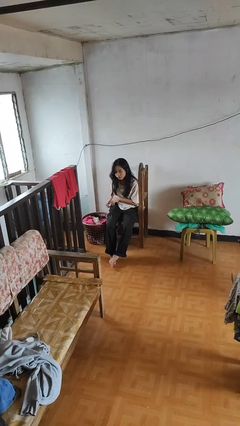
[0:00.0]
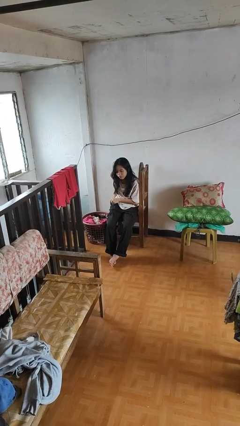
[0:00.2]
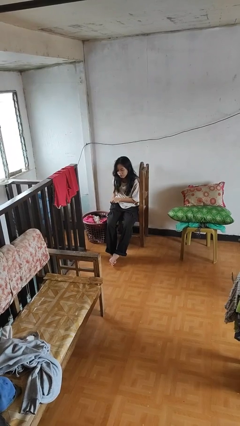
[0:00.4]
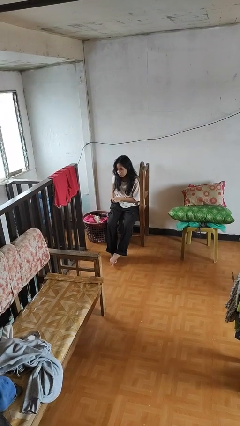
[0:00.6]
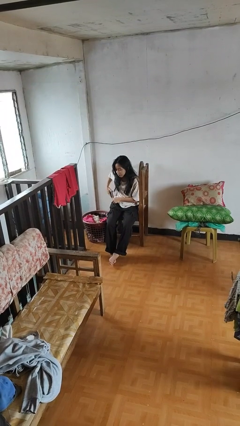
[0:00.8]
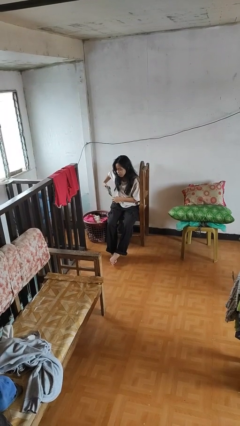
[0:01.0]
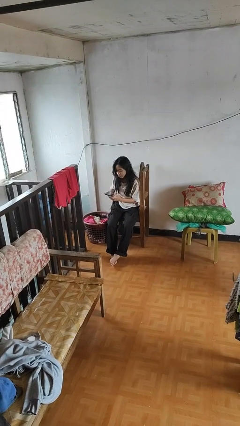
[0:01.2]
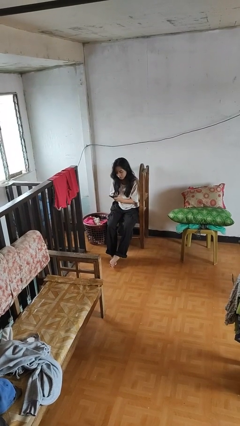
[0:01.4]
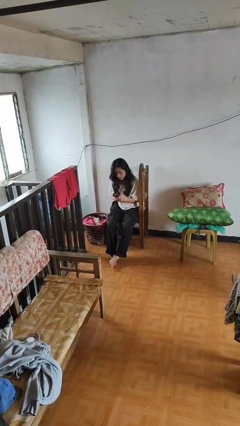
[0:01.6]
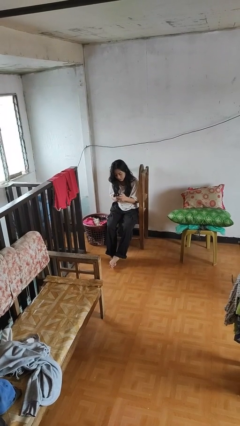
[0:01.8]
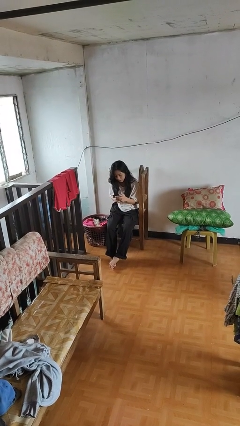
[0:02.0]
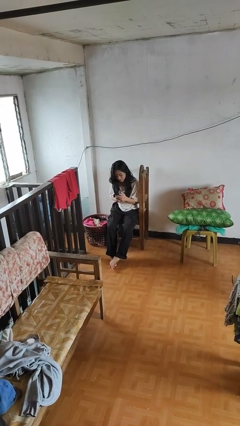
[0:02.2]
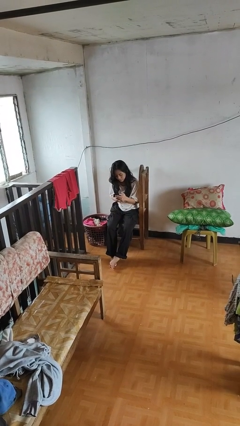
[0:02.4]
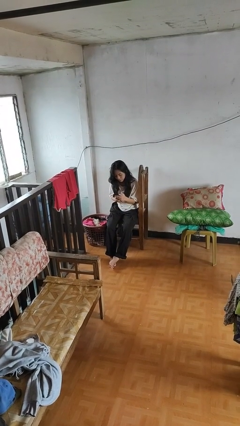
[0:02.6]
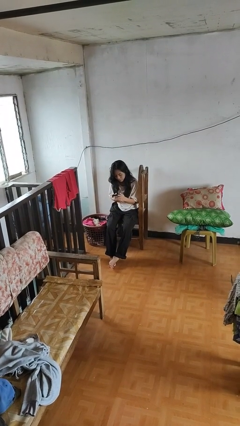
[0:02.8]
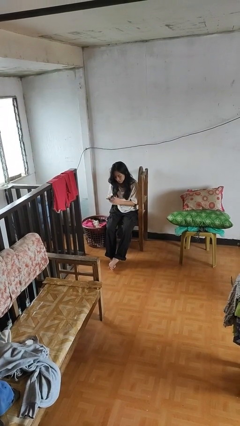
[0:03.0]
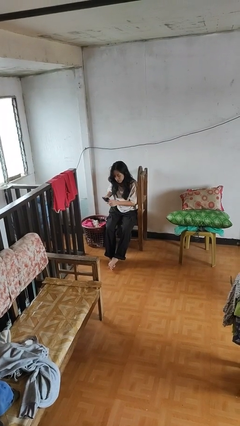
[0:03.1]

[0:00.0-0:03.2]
person takes phone from pocket

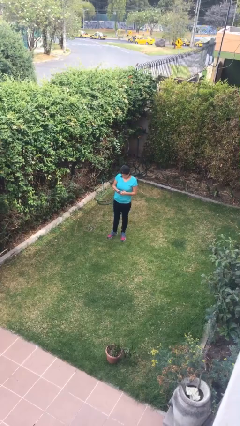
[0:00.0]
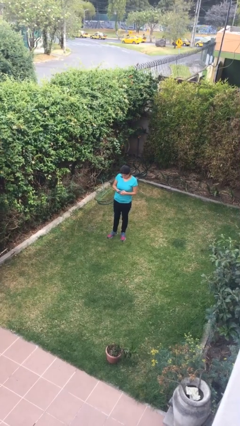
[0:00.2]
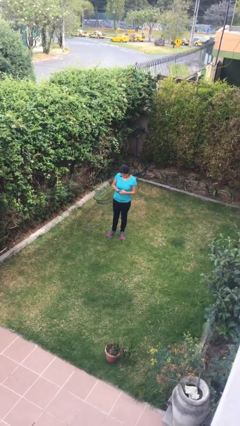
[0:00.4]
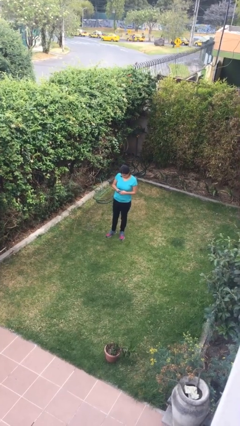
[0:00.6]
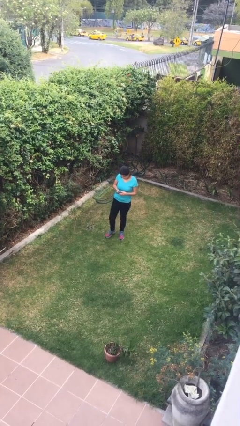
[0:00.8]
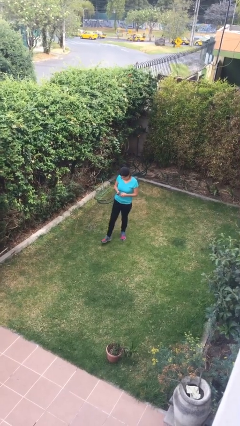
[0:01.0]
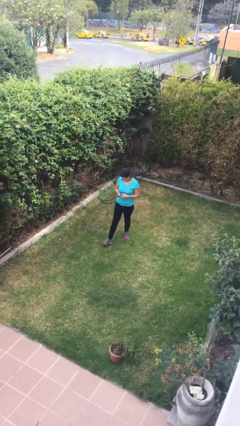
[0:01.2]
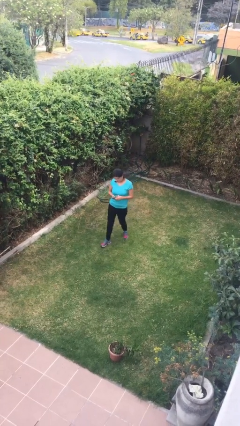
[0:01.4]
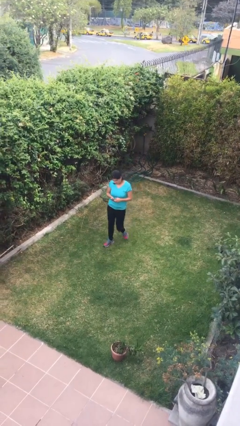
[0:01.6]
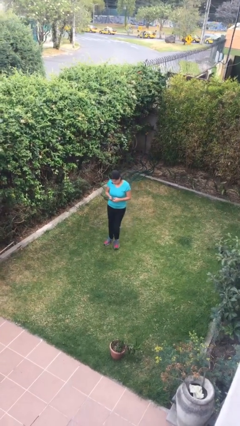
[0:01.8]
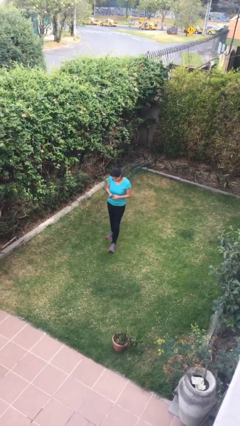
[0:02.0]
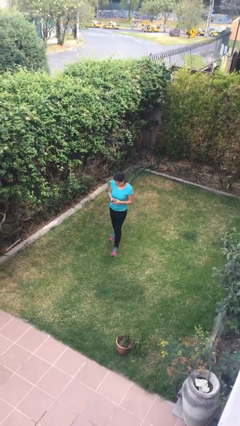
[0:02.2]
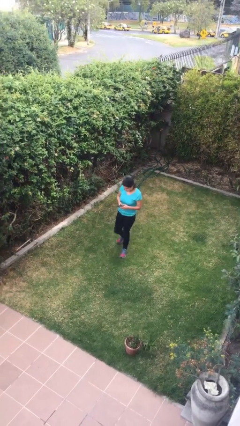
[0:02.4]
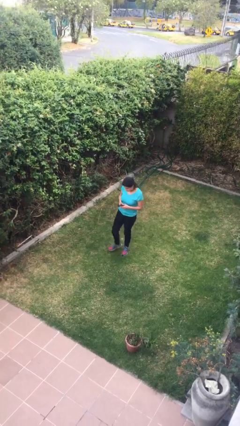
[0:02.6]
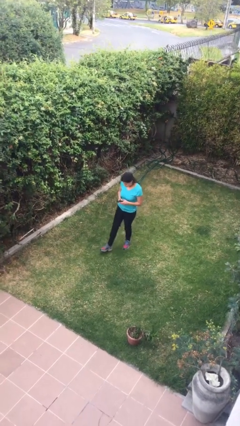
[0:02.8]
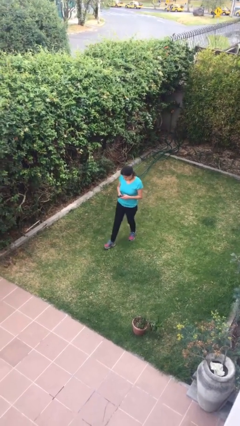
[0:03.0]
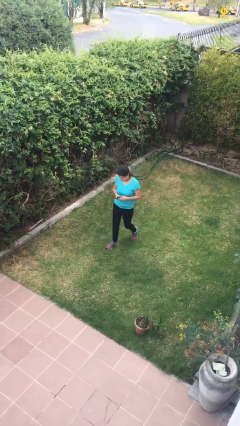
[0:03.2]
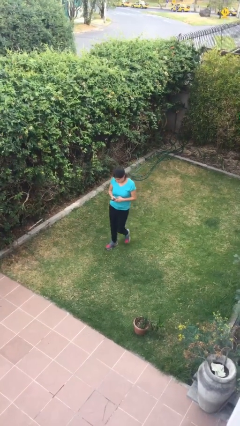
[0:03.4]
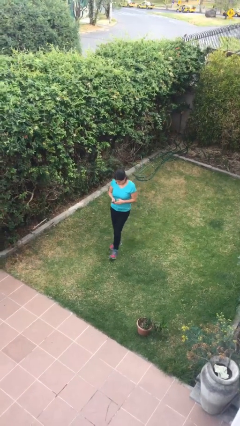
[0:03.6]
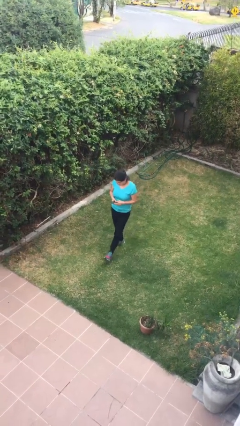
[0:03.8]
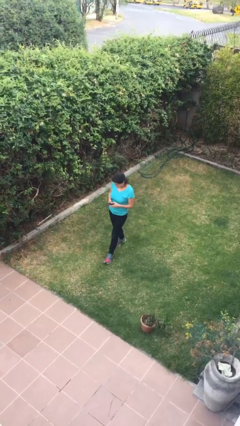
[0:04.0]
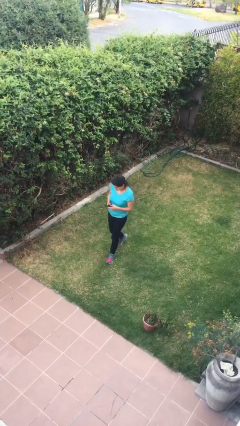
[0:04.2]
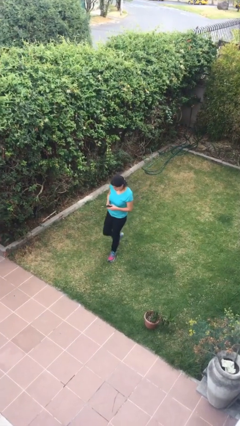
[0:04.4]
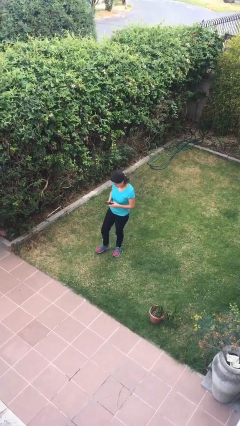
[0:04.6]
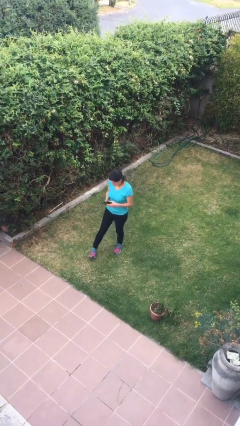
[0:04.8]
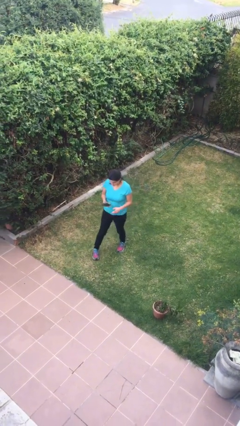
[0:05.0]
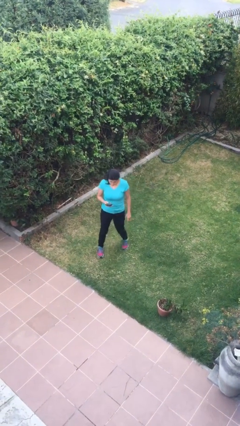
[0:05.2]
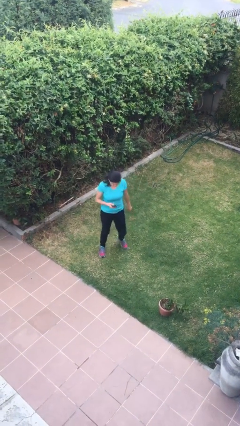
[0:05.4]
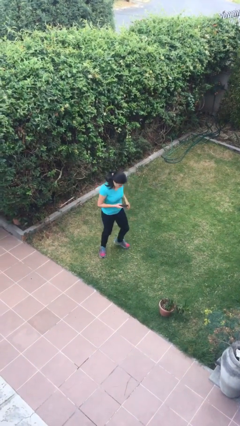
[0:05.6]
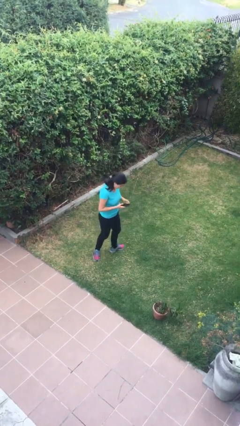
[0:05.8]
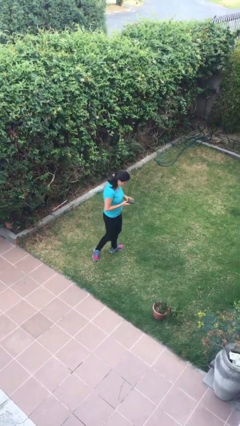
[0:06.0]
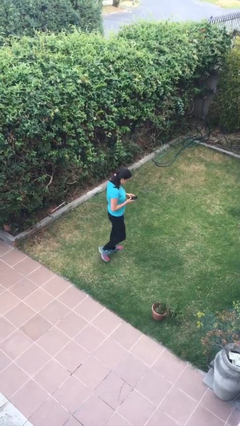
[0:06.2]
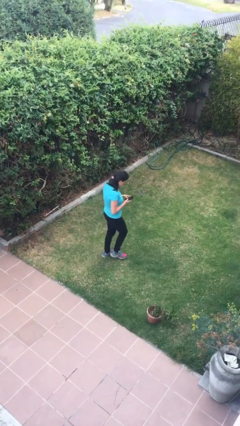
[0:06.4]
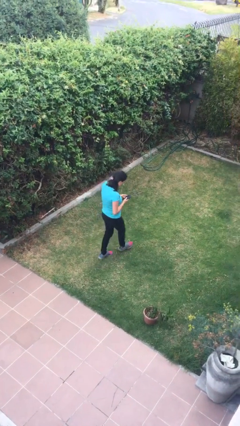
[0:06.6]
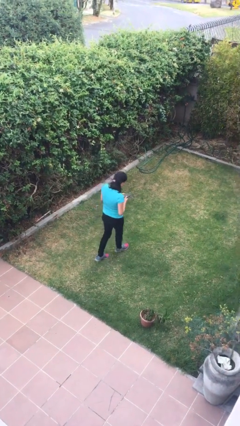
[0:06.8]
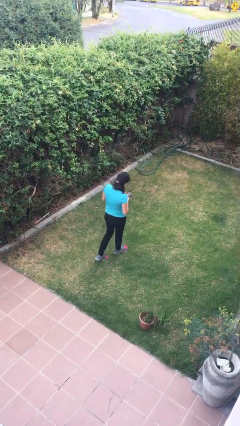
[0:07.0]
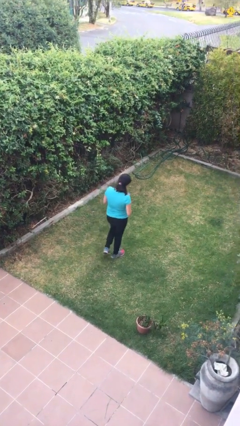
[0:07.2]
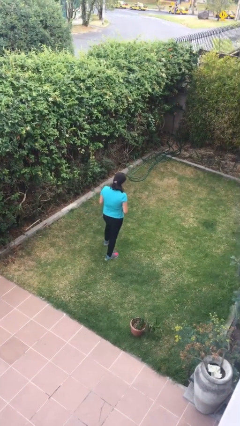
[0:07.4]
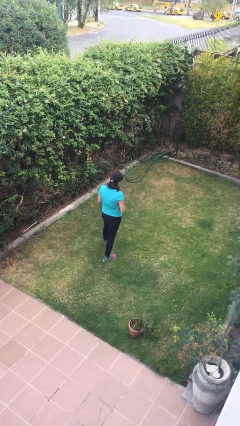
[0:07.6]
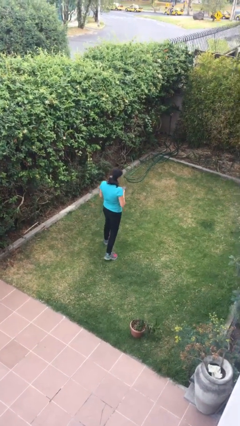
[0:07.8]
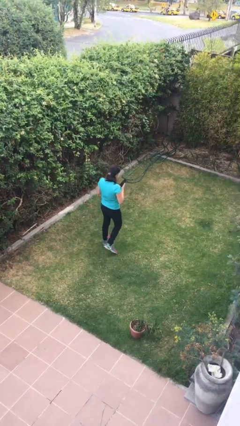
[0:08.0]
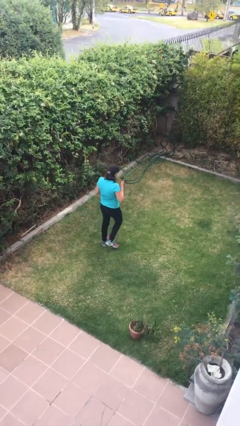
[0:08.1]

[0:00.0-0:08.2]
person texts on phone

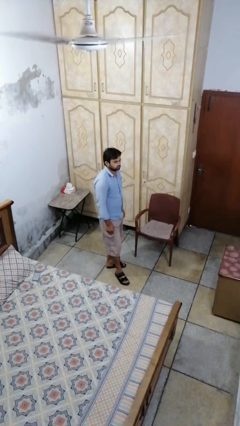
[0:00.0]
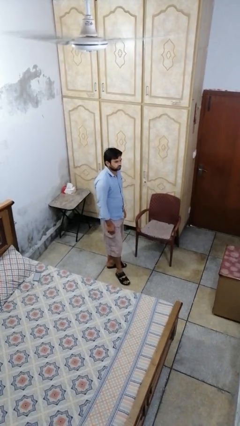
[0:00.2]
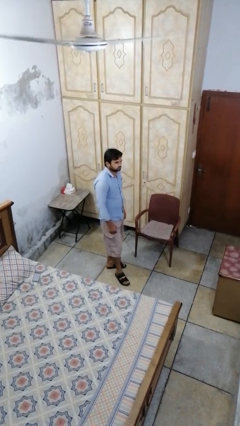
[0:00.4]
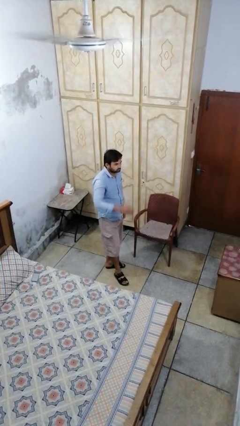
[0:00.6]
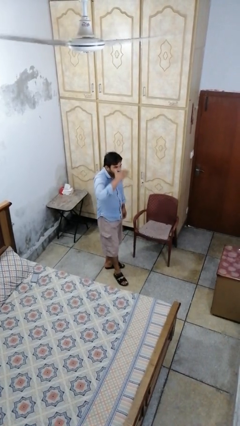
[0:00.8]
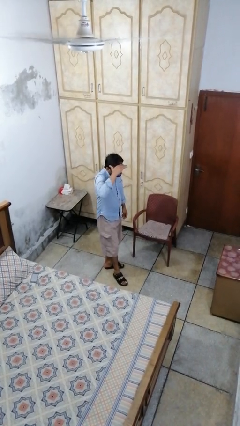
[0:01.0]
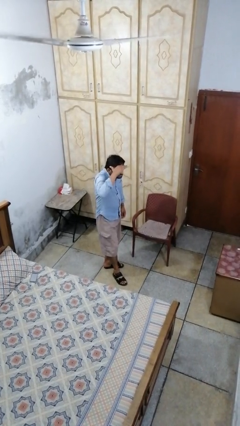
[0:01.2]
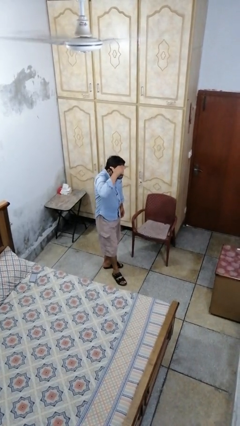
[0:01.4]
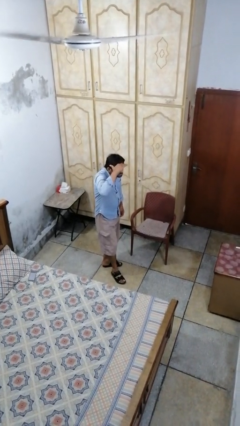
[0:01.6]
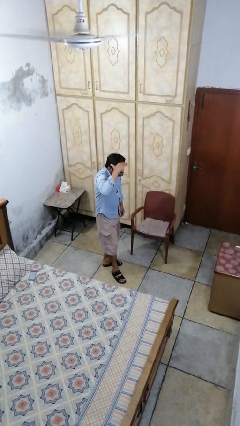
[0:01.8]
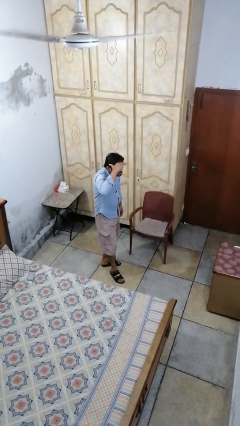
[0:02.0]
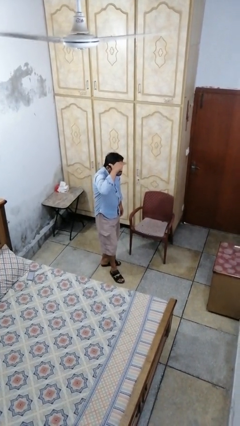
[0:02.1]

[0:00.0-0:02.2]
person shades eyes

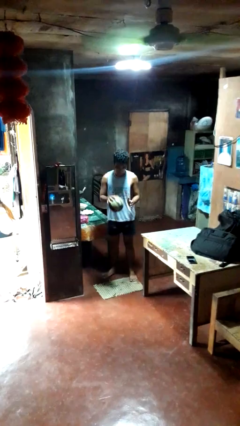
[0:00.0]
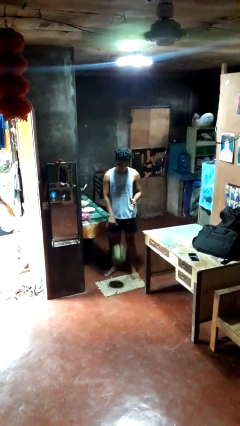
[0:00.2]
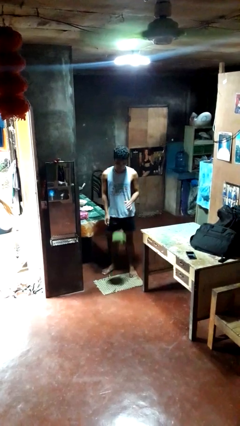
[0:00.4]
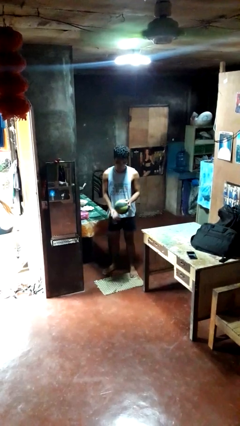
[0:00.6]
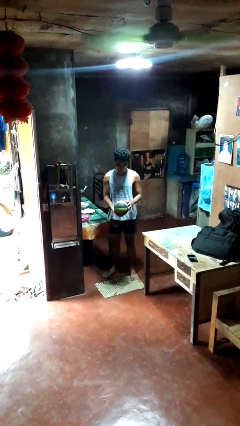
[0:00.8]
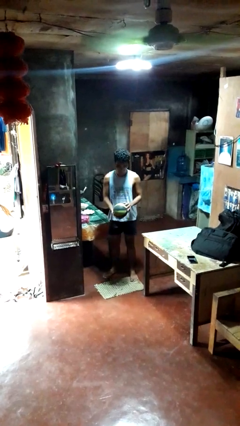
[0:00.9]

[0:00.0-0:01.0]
person bounces ball on floor

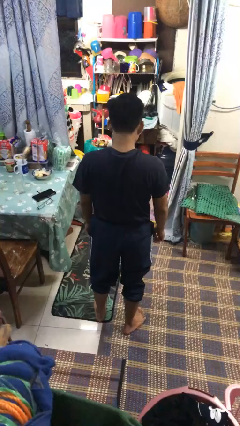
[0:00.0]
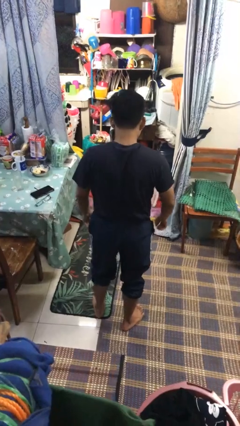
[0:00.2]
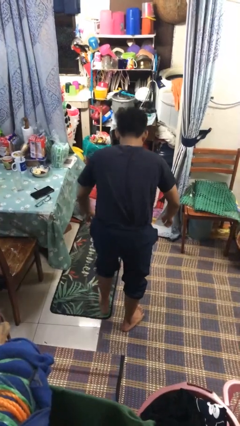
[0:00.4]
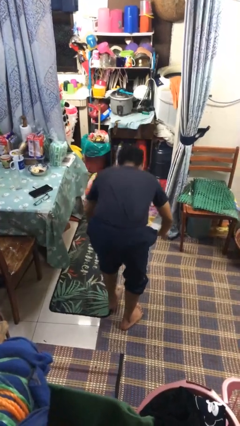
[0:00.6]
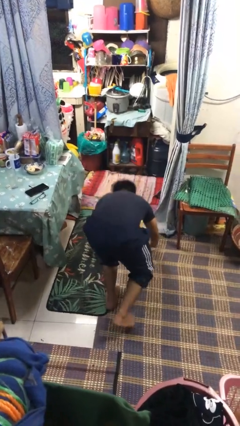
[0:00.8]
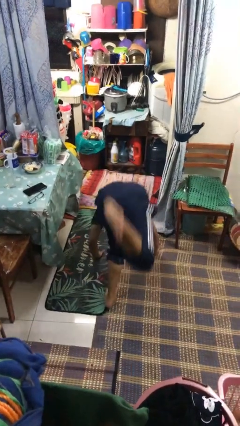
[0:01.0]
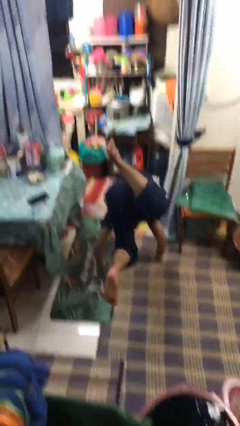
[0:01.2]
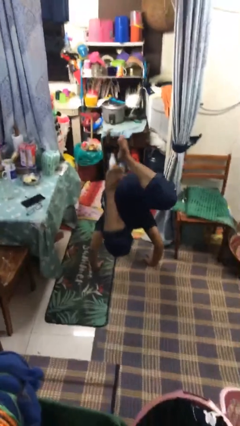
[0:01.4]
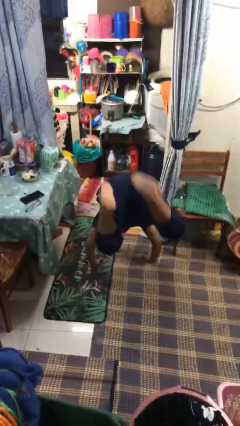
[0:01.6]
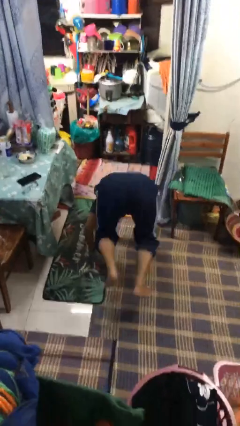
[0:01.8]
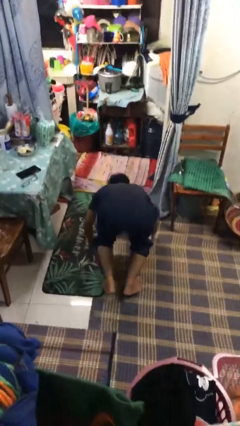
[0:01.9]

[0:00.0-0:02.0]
person handstand

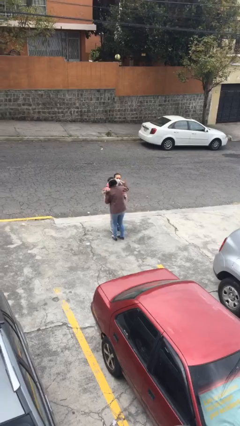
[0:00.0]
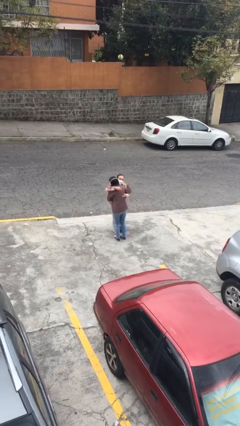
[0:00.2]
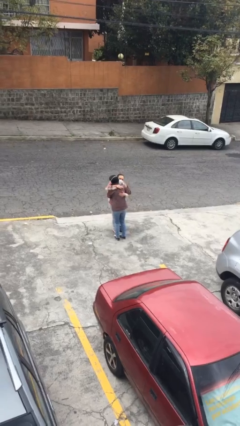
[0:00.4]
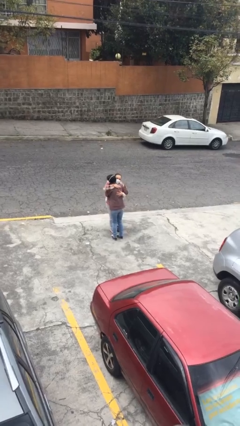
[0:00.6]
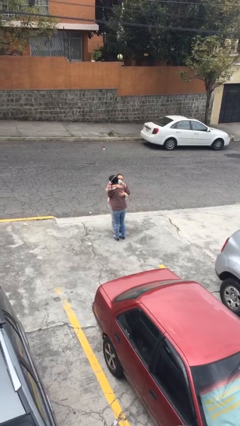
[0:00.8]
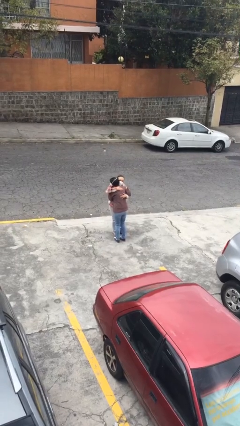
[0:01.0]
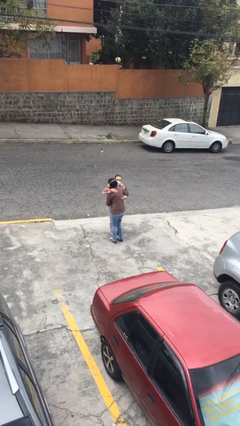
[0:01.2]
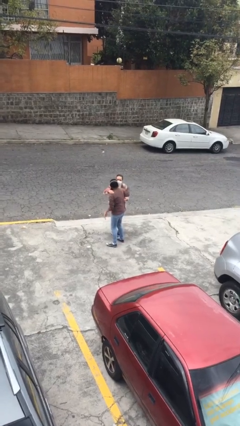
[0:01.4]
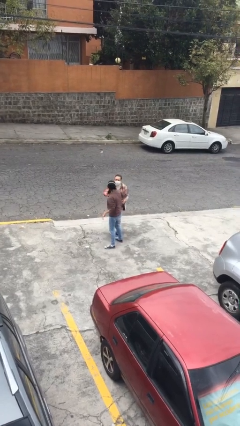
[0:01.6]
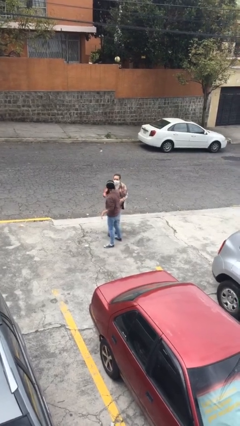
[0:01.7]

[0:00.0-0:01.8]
person embraces person
